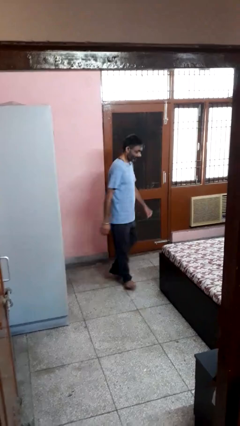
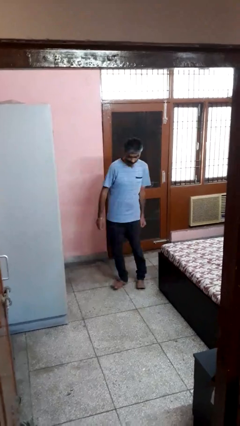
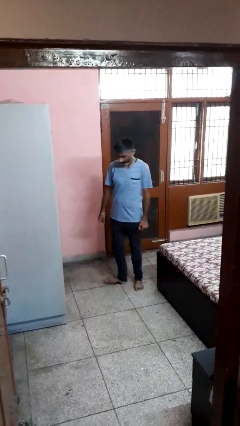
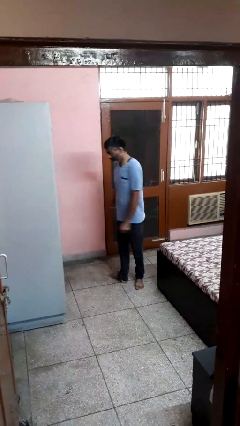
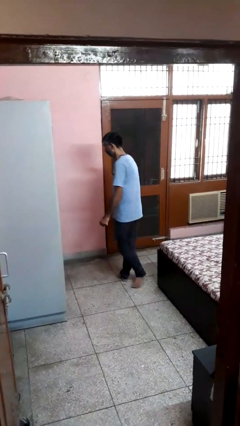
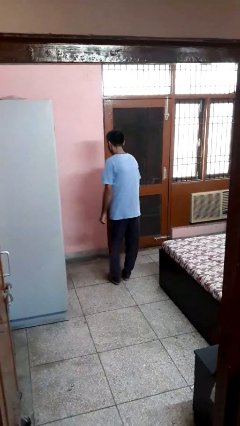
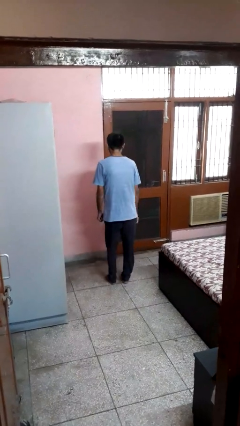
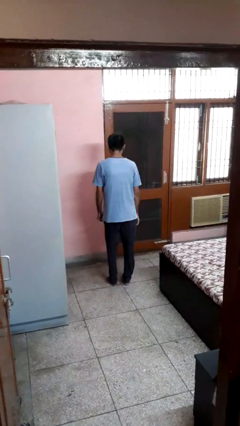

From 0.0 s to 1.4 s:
person twirls

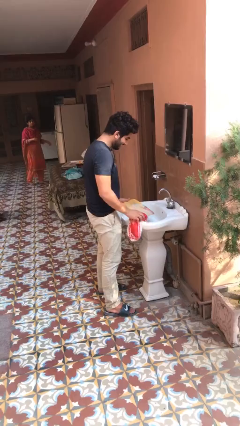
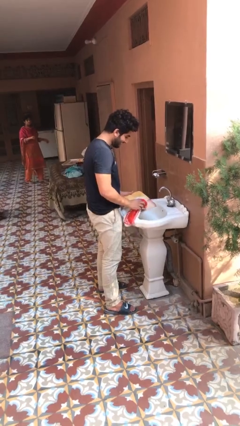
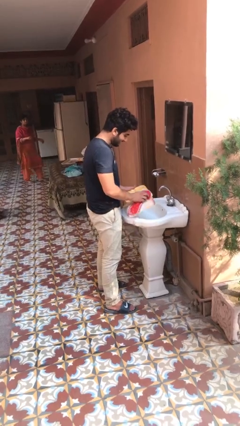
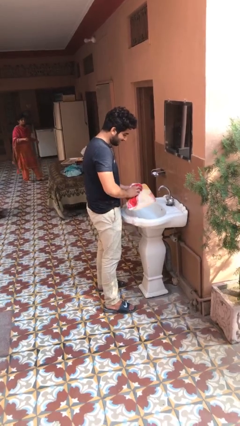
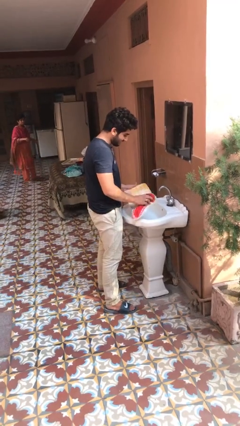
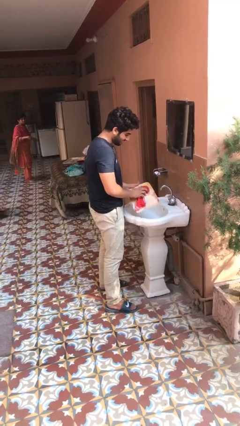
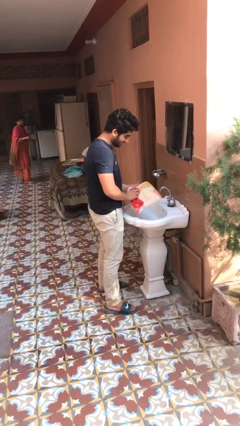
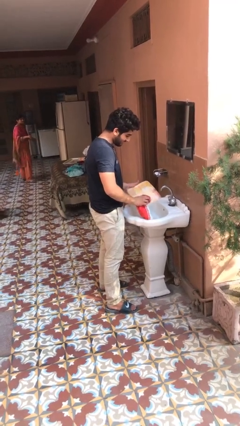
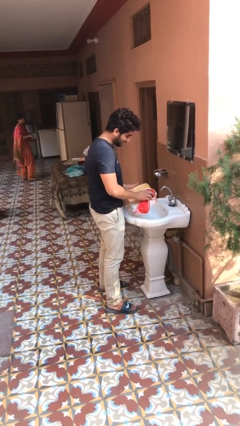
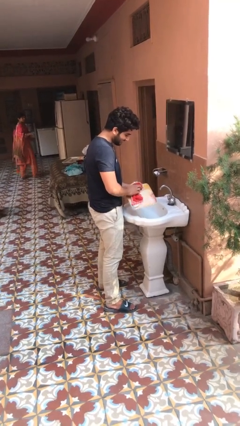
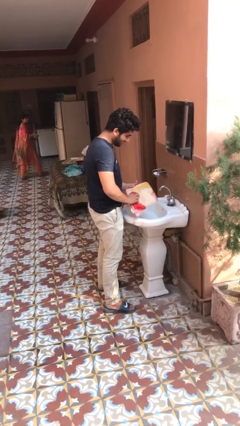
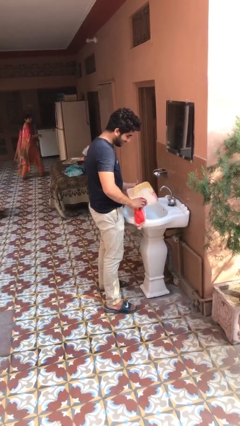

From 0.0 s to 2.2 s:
person dries dish

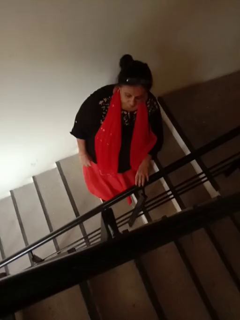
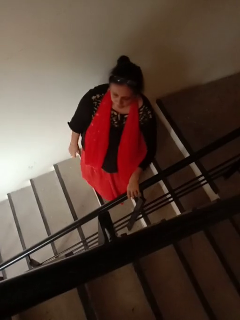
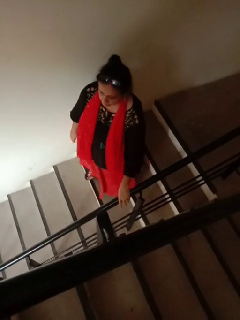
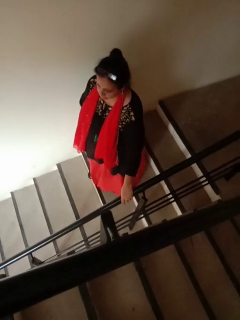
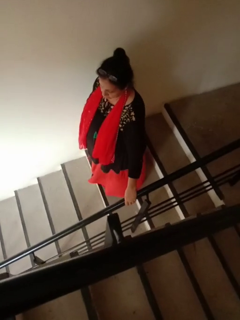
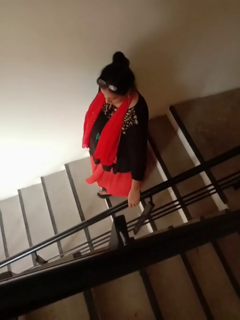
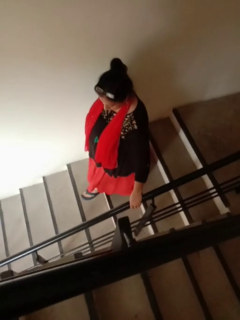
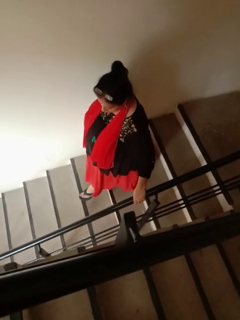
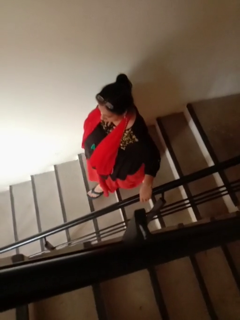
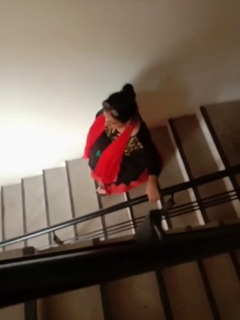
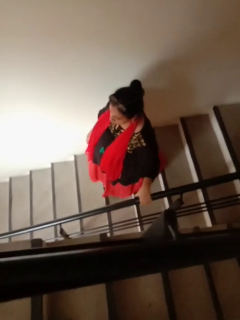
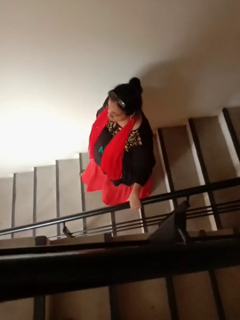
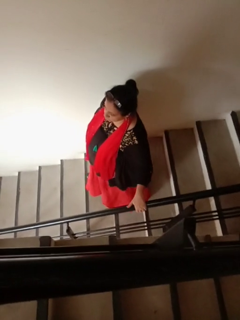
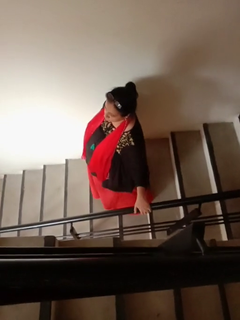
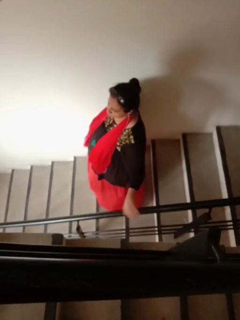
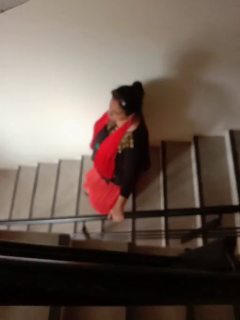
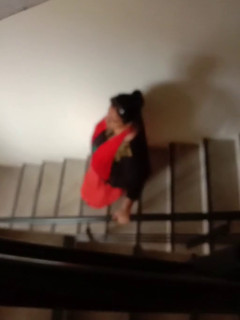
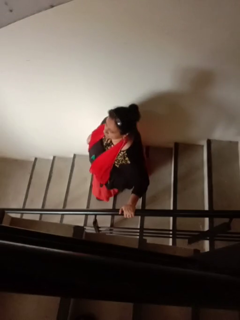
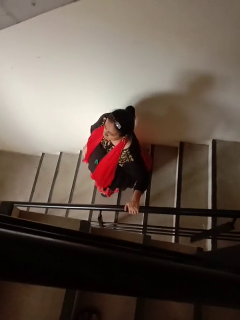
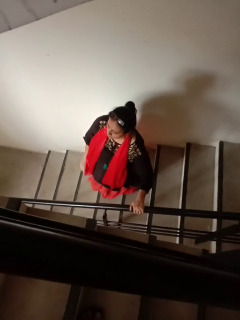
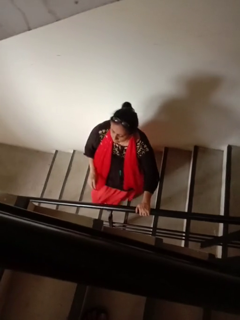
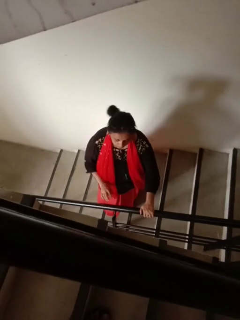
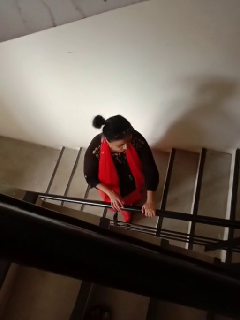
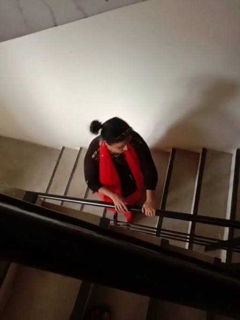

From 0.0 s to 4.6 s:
person climbs down stairs

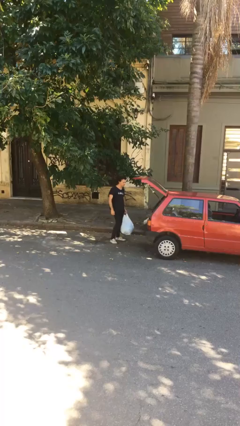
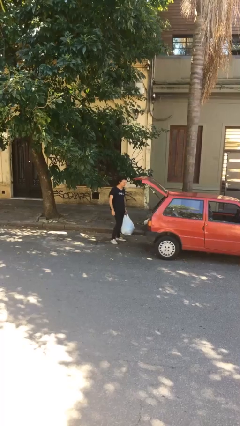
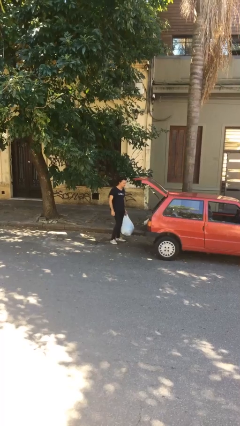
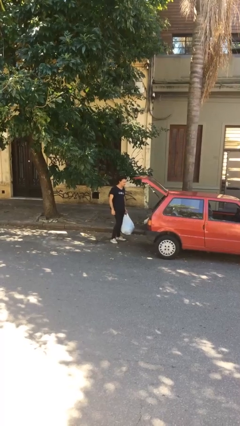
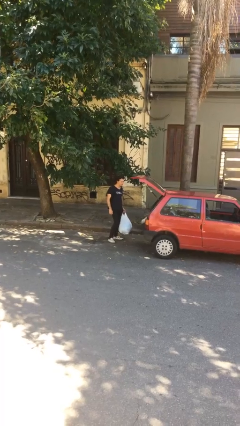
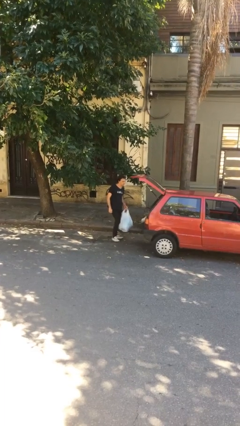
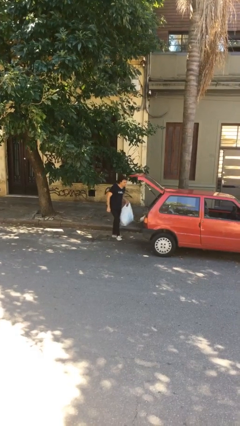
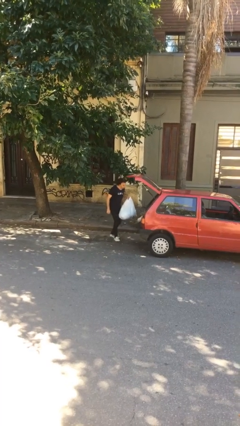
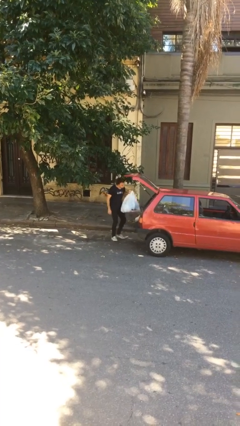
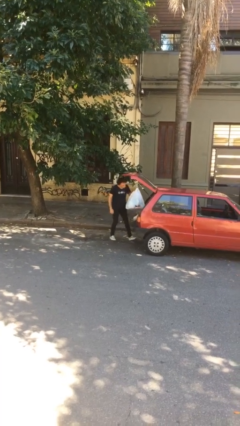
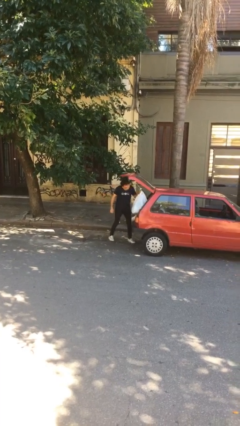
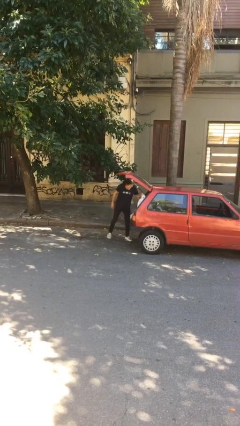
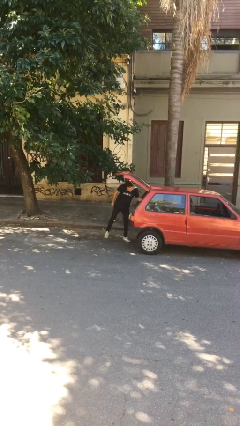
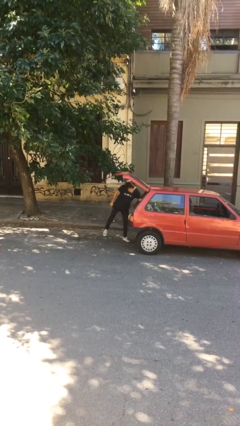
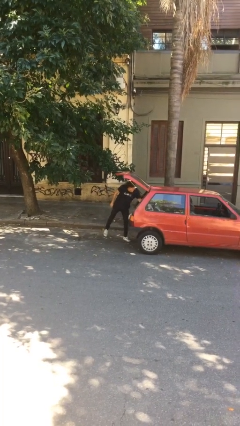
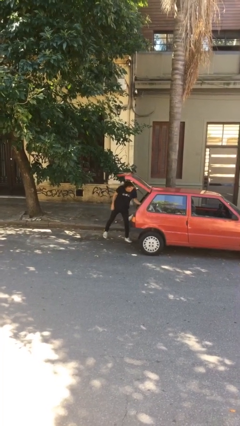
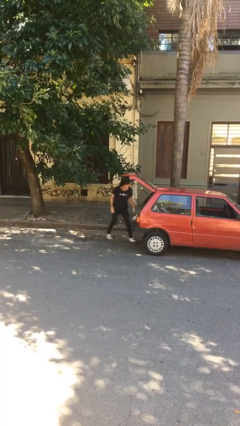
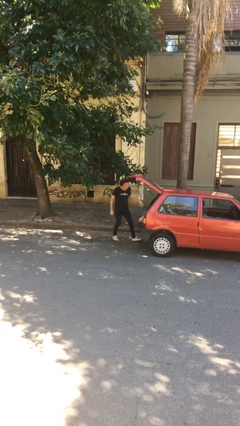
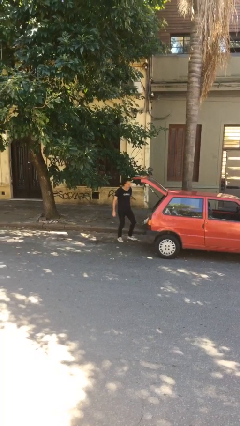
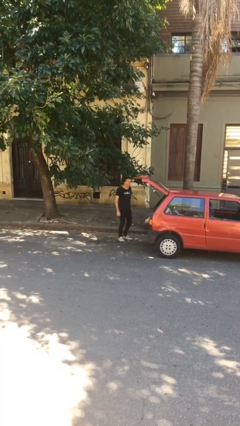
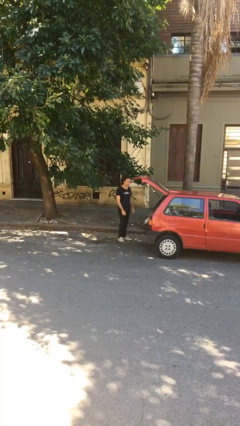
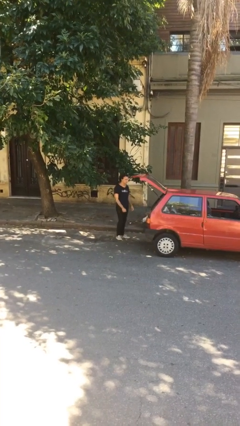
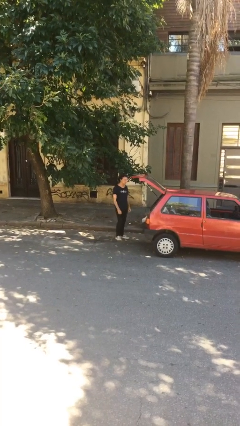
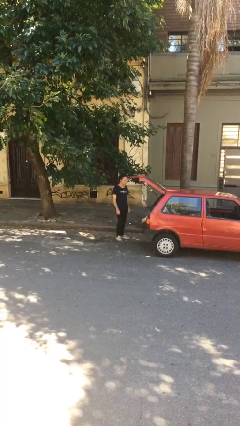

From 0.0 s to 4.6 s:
person loads car

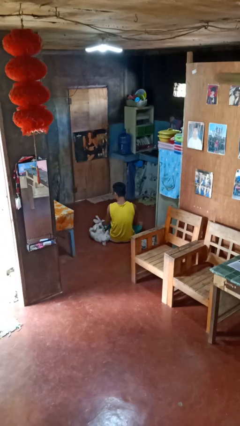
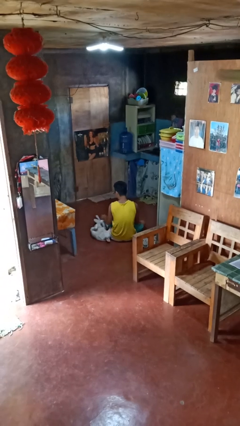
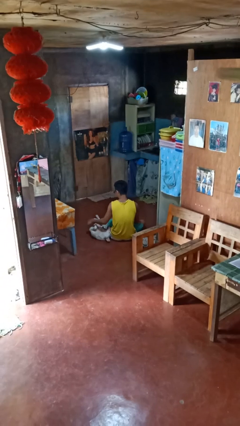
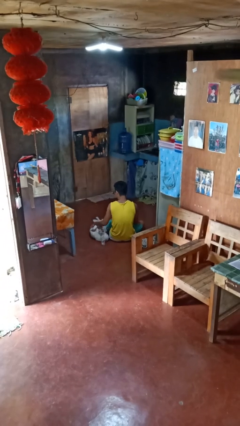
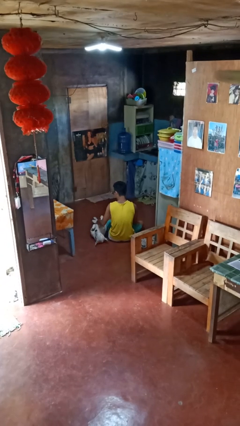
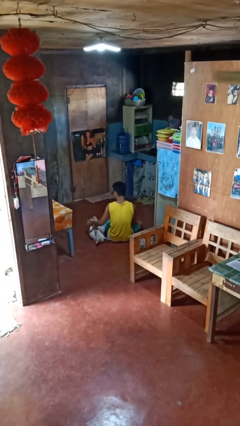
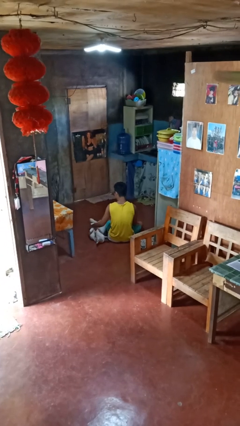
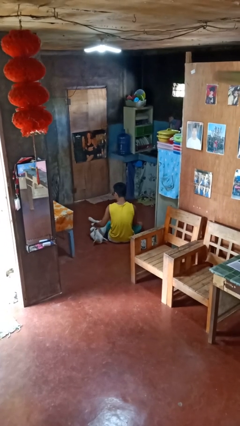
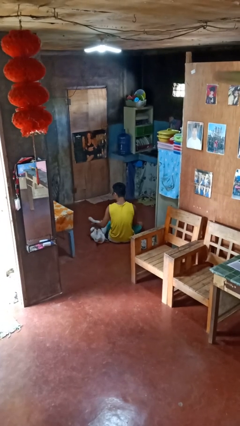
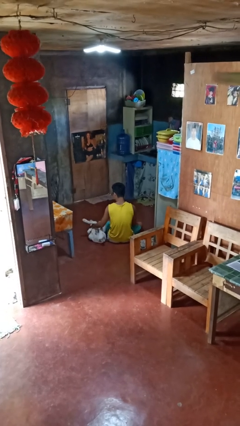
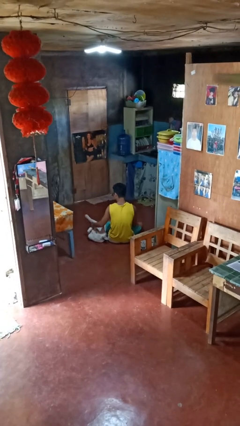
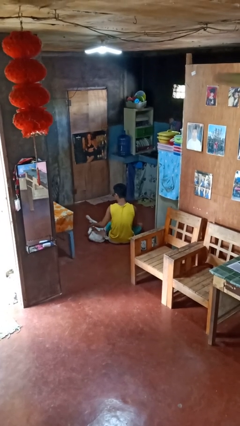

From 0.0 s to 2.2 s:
person pets dog

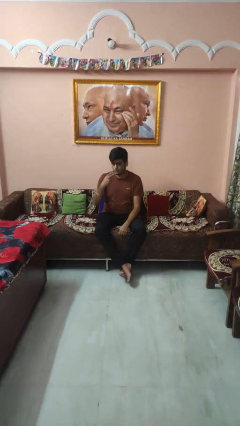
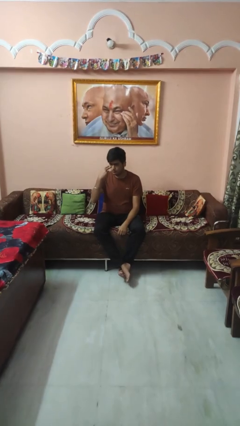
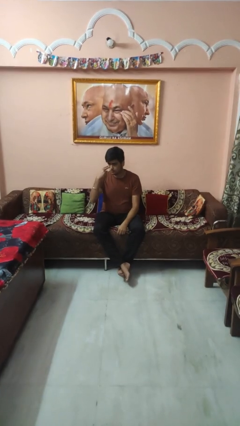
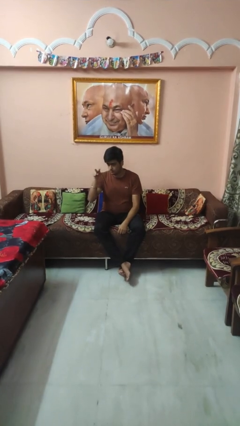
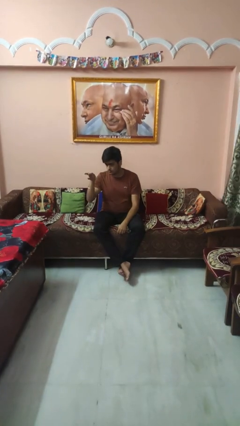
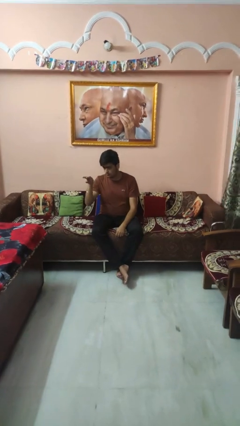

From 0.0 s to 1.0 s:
person gestures watch closely

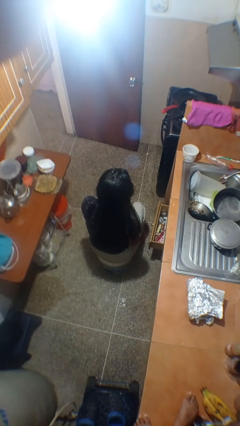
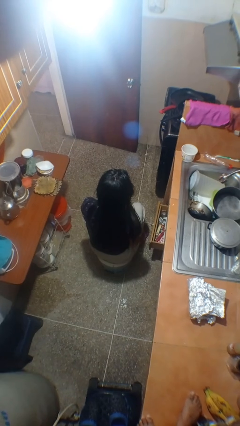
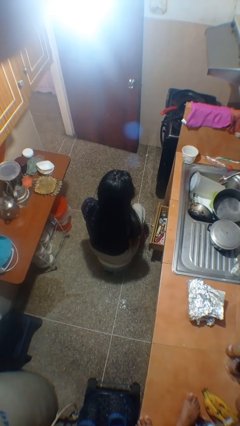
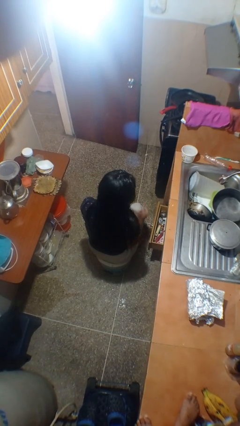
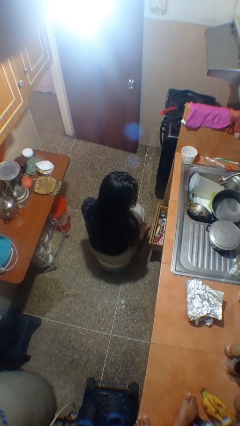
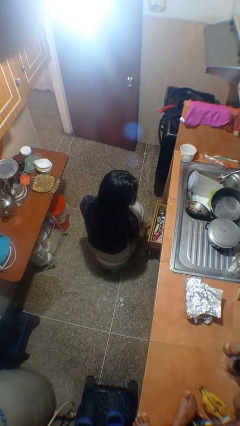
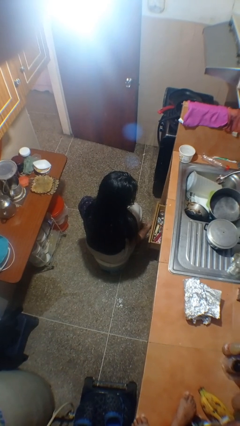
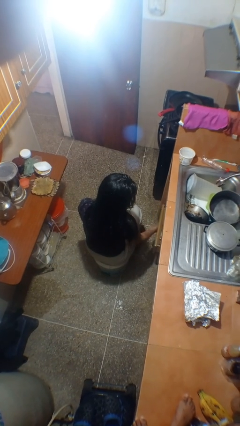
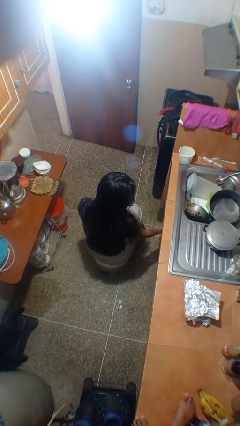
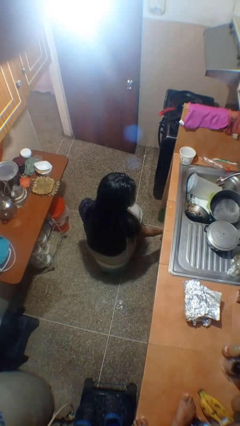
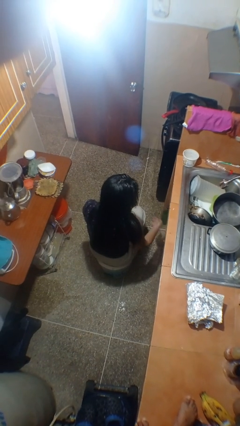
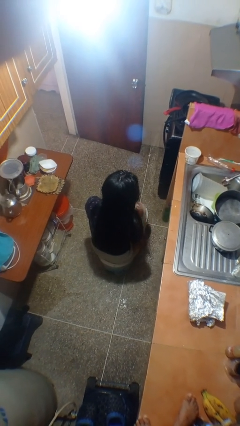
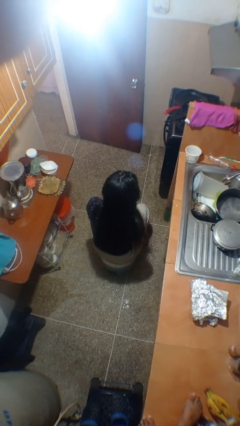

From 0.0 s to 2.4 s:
person closes kitchen drawer
